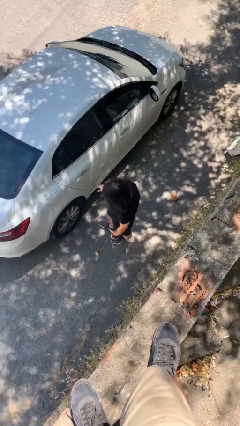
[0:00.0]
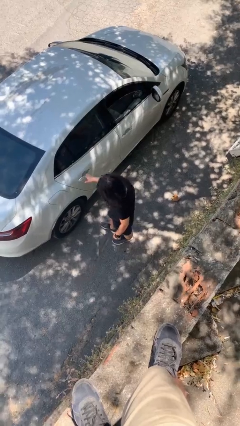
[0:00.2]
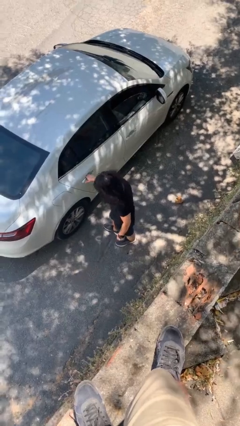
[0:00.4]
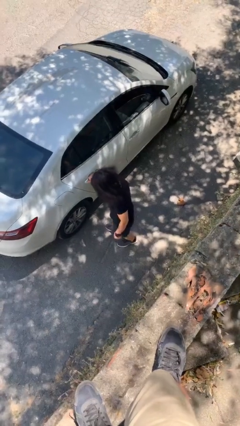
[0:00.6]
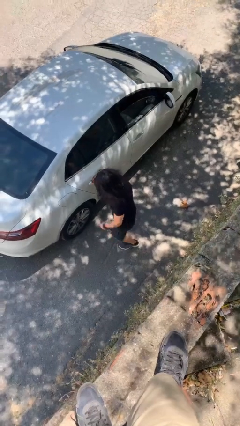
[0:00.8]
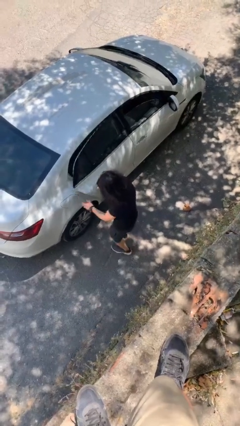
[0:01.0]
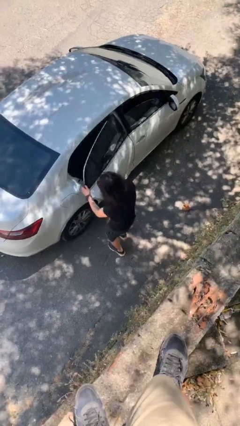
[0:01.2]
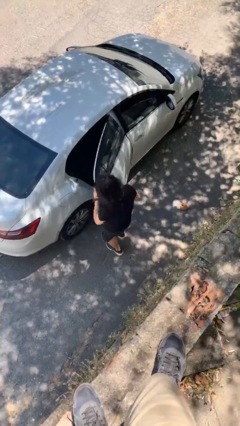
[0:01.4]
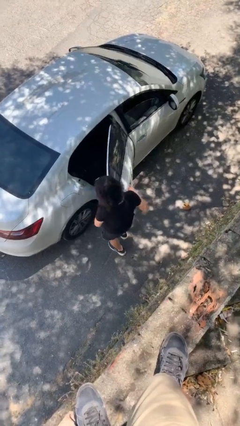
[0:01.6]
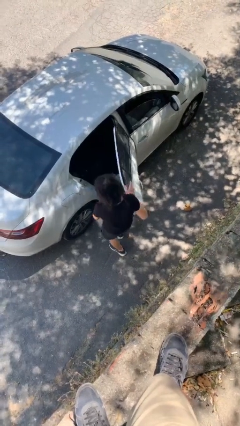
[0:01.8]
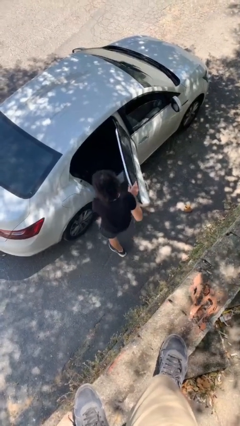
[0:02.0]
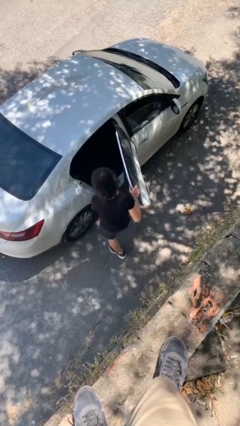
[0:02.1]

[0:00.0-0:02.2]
person opens car door

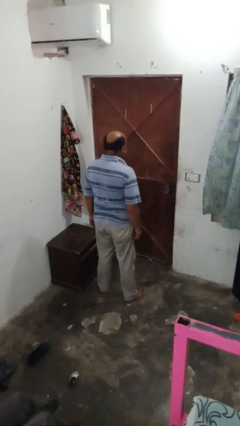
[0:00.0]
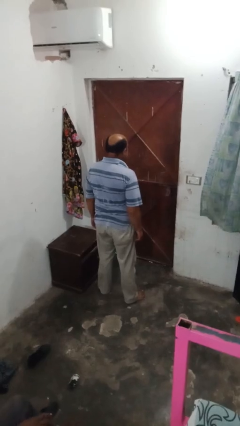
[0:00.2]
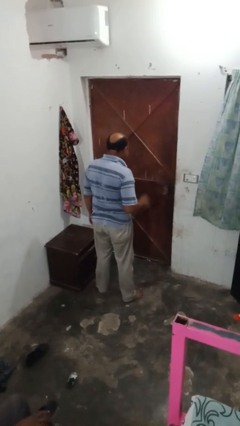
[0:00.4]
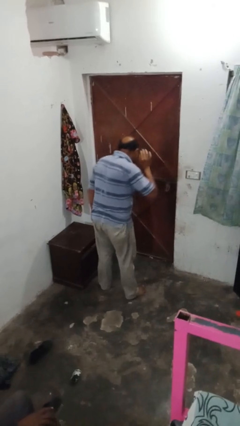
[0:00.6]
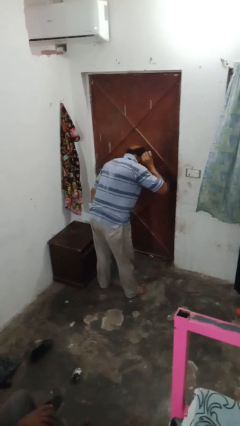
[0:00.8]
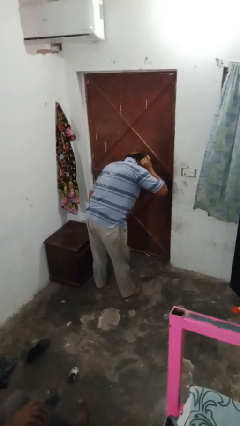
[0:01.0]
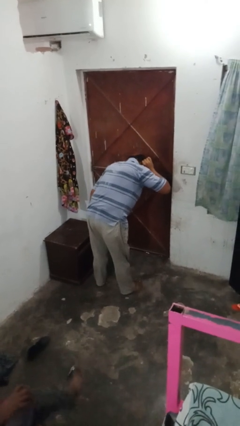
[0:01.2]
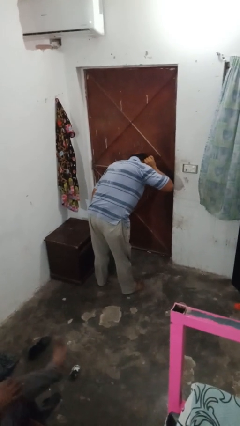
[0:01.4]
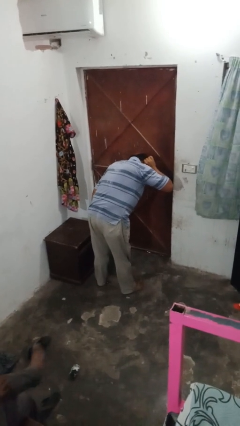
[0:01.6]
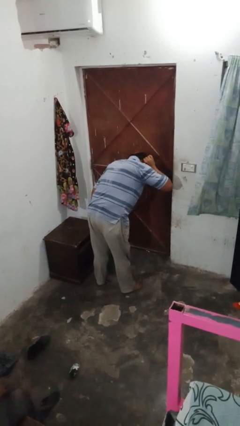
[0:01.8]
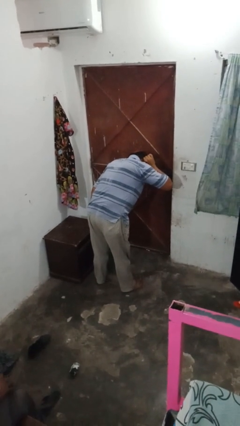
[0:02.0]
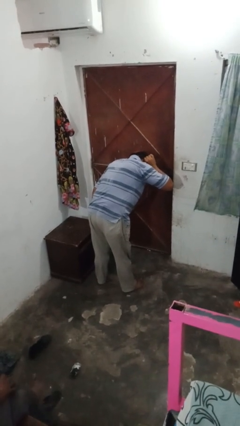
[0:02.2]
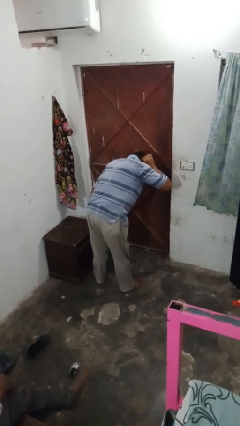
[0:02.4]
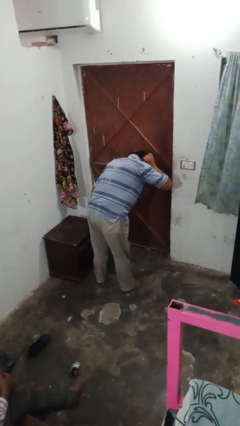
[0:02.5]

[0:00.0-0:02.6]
person gestures listen closely

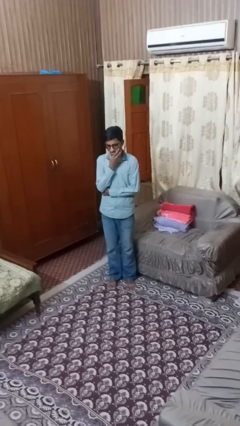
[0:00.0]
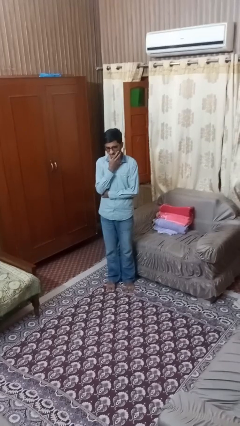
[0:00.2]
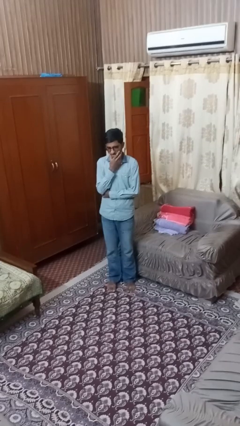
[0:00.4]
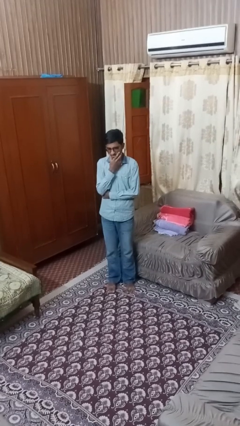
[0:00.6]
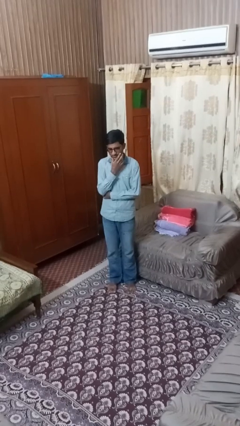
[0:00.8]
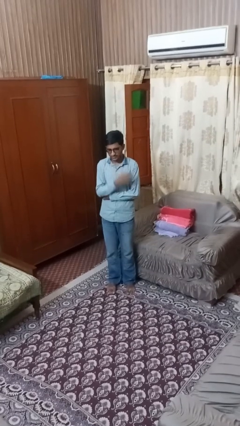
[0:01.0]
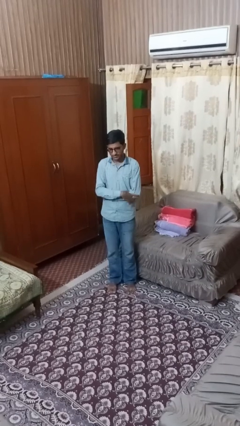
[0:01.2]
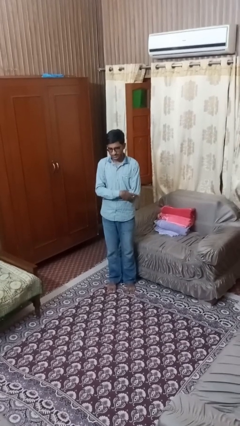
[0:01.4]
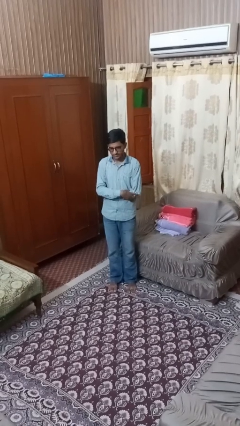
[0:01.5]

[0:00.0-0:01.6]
person strokes chin

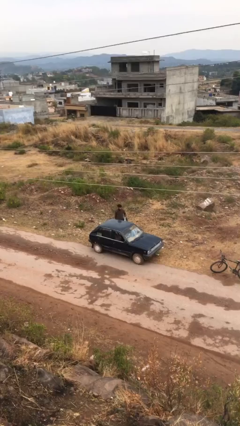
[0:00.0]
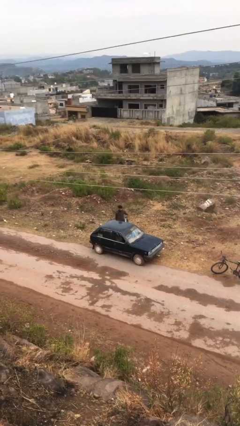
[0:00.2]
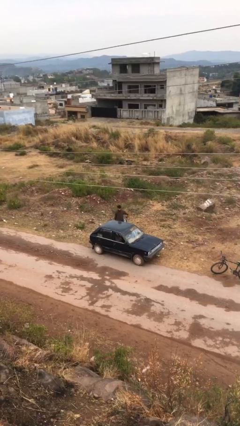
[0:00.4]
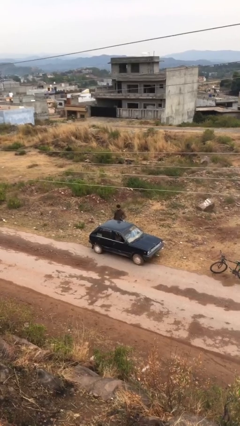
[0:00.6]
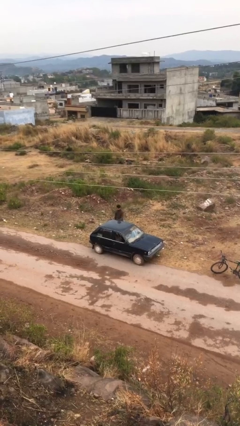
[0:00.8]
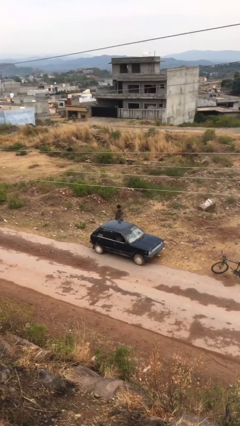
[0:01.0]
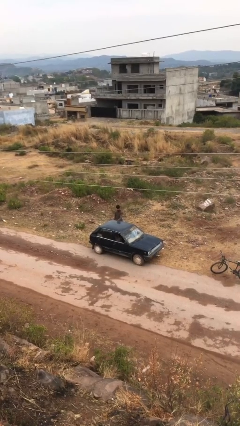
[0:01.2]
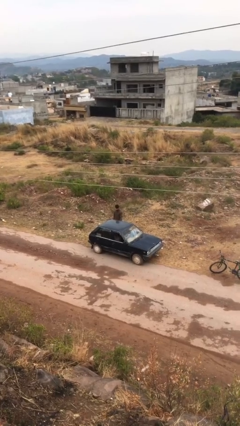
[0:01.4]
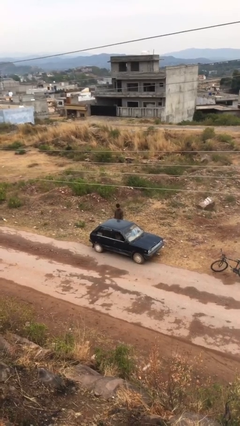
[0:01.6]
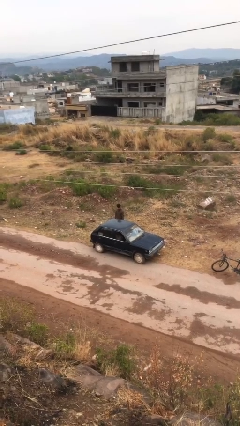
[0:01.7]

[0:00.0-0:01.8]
person closes car door

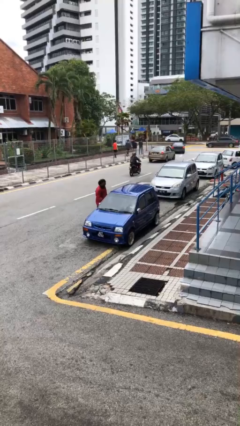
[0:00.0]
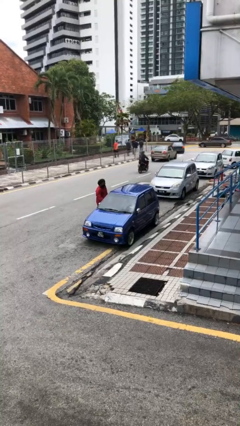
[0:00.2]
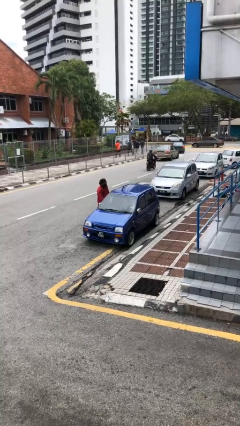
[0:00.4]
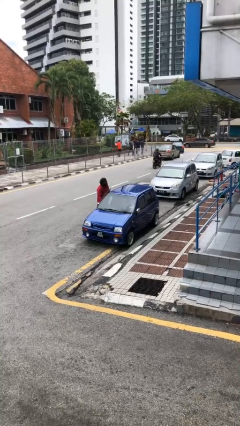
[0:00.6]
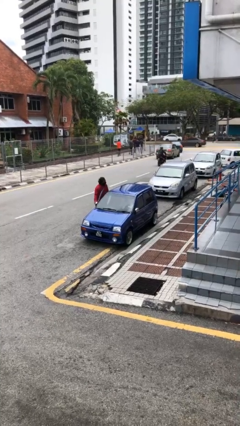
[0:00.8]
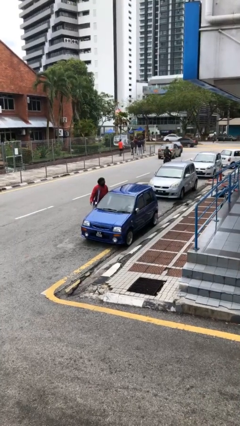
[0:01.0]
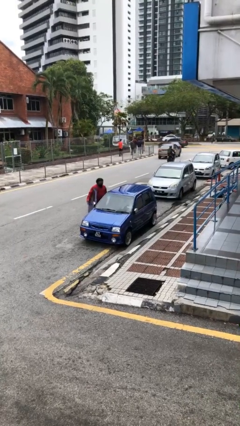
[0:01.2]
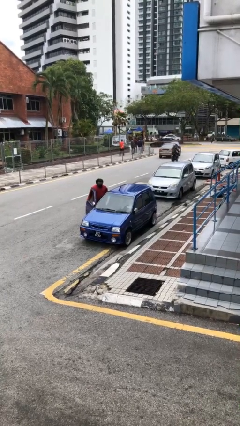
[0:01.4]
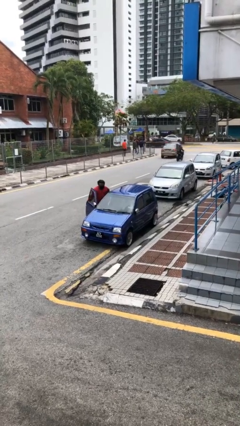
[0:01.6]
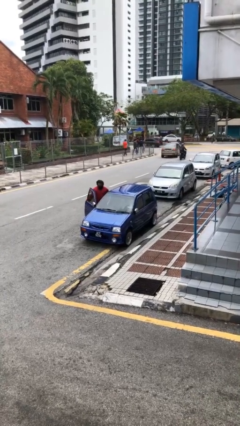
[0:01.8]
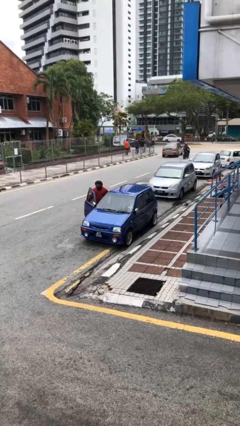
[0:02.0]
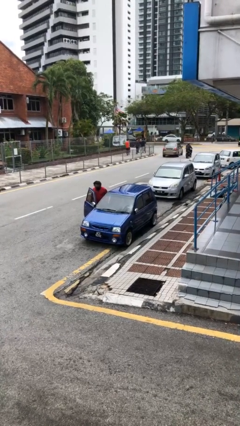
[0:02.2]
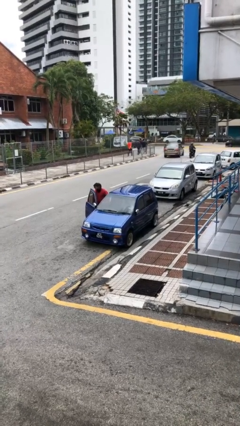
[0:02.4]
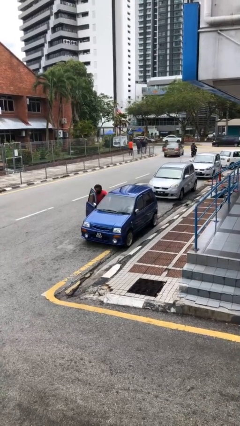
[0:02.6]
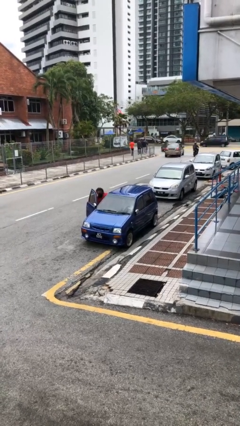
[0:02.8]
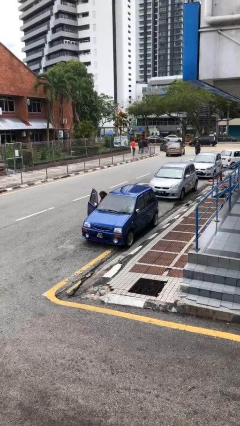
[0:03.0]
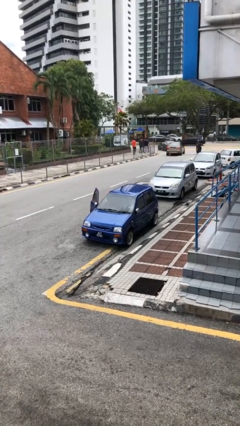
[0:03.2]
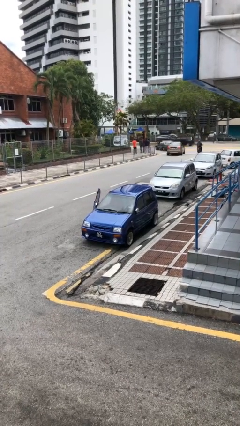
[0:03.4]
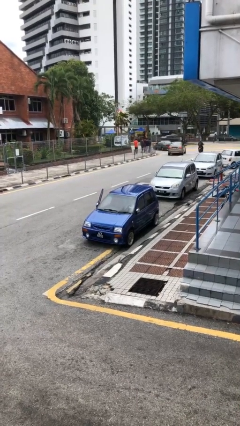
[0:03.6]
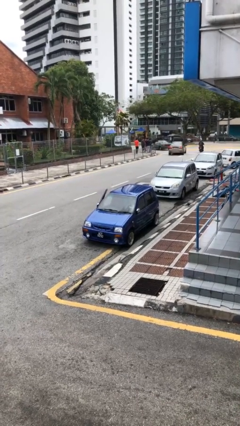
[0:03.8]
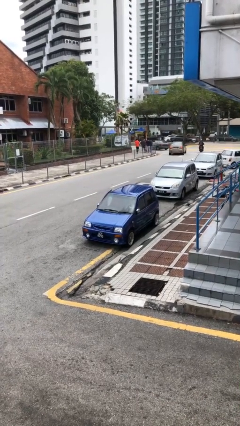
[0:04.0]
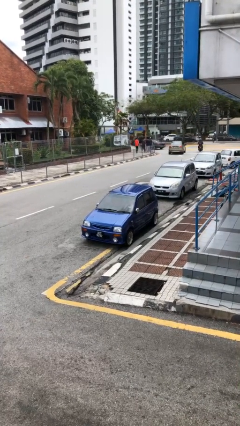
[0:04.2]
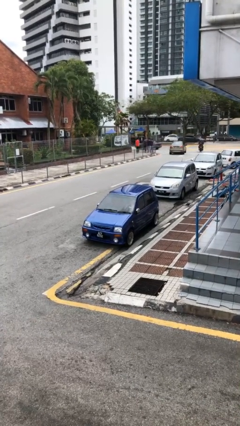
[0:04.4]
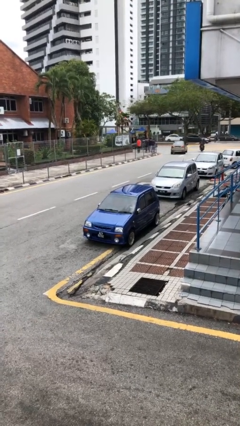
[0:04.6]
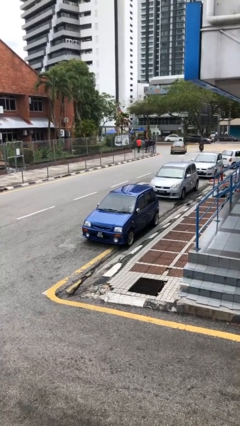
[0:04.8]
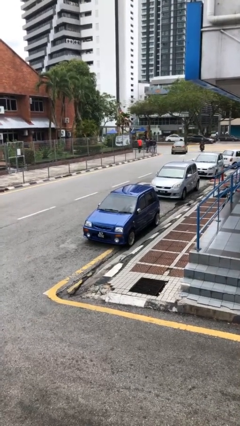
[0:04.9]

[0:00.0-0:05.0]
car picks up person

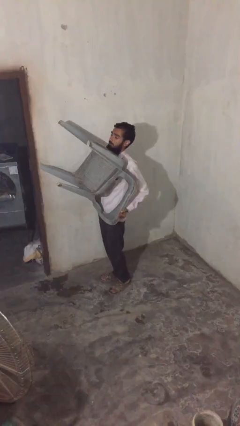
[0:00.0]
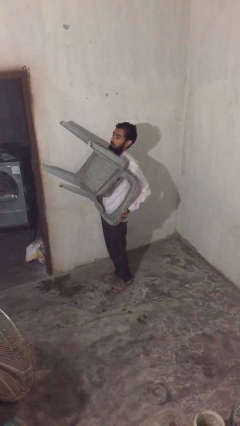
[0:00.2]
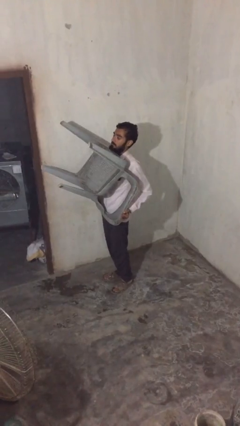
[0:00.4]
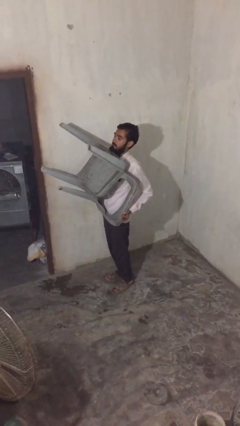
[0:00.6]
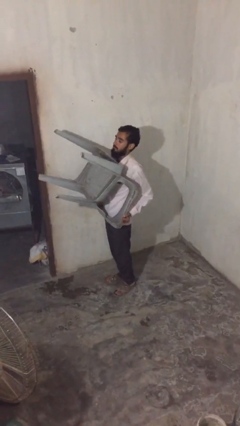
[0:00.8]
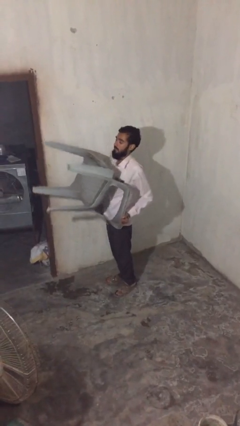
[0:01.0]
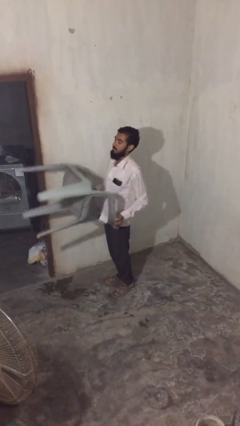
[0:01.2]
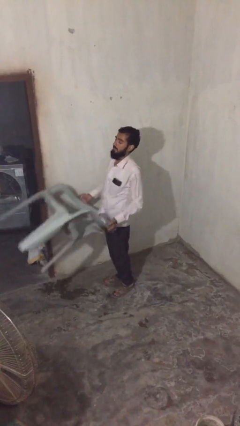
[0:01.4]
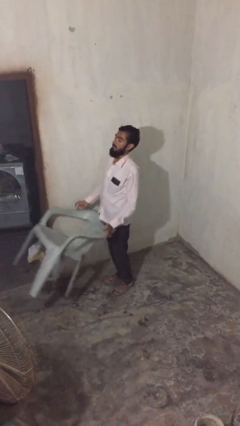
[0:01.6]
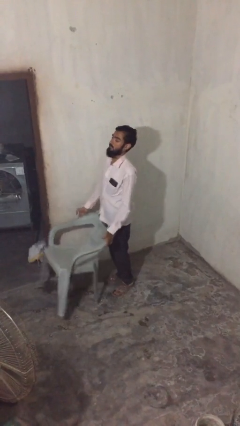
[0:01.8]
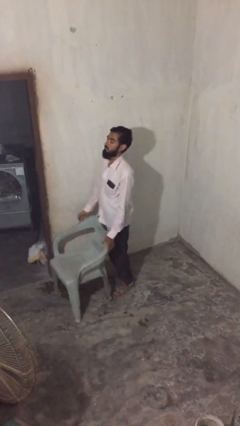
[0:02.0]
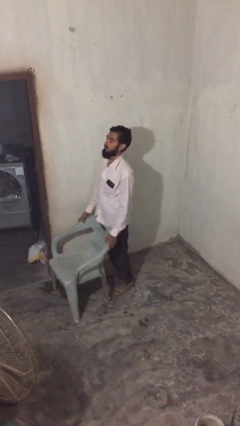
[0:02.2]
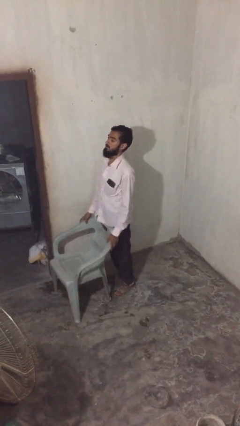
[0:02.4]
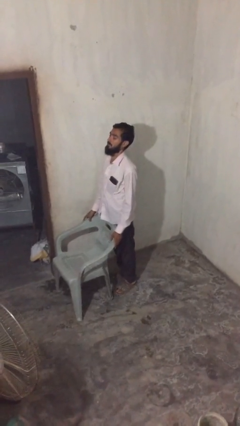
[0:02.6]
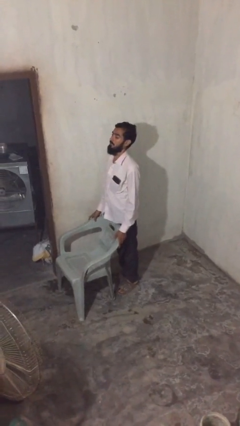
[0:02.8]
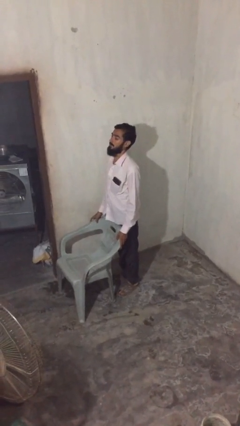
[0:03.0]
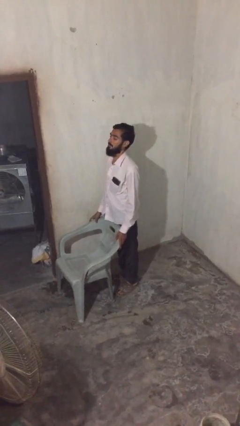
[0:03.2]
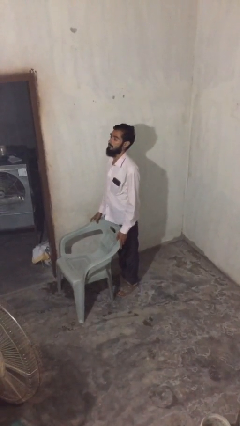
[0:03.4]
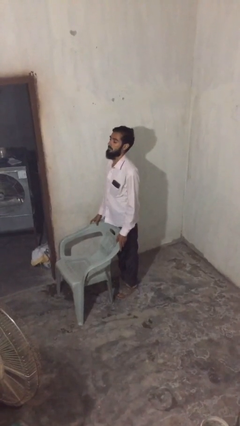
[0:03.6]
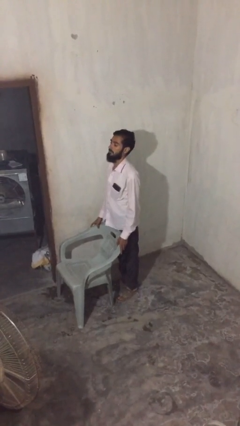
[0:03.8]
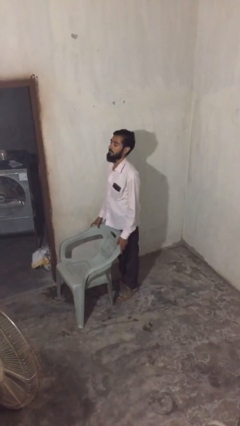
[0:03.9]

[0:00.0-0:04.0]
person puts down object on floor
